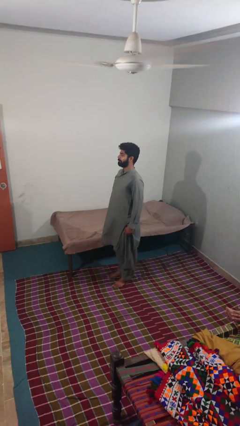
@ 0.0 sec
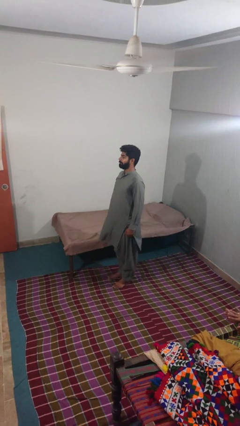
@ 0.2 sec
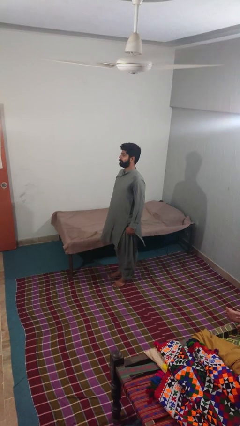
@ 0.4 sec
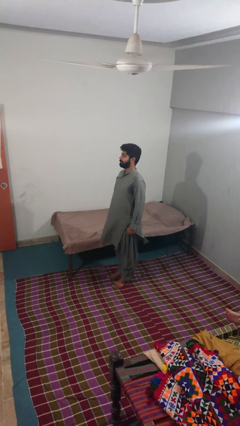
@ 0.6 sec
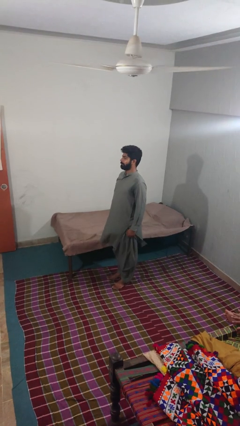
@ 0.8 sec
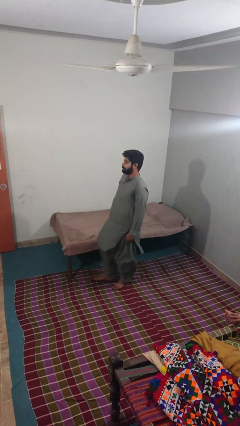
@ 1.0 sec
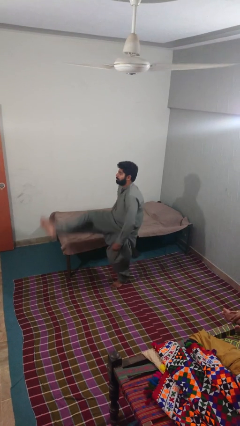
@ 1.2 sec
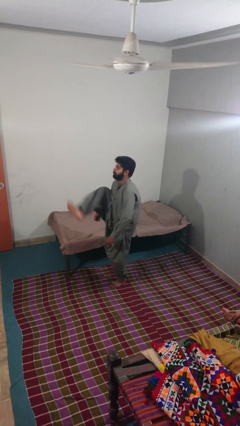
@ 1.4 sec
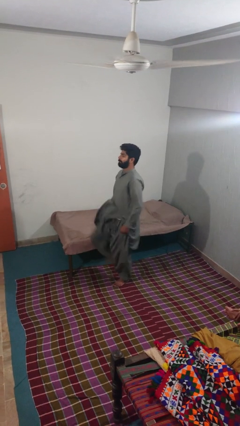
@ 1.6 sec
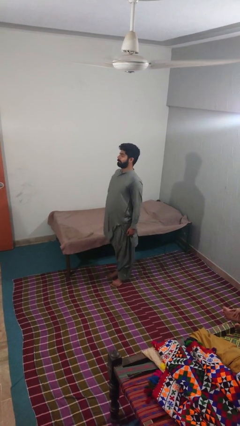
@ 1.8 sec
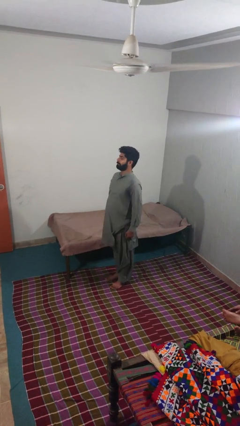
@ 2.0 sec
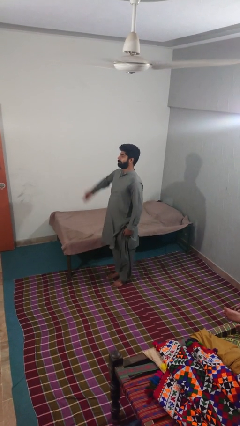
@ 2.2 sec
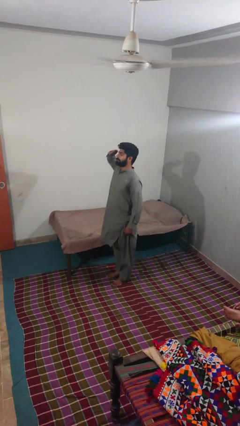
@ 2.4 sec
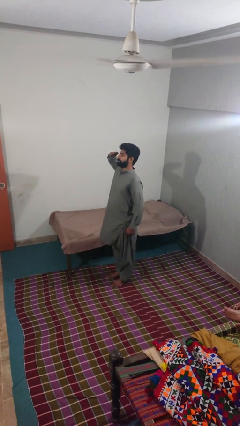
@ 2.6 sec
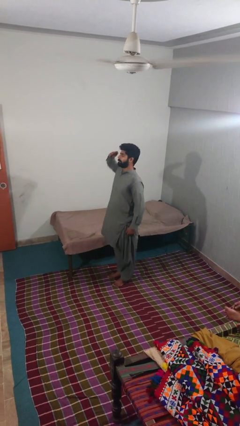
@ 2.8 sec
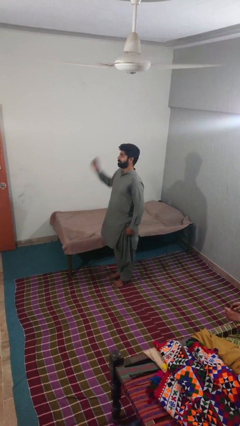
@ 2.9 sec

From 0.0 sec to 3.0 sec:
person salutes

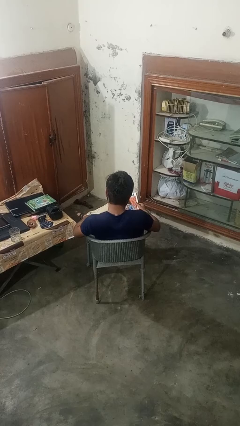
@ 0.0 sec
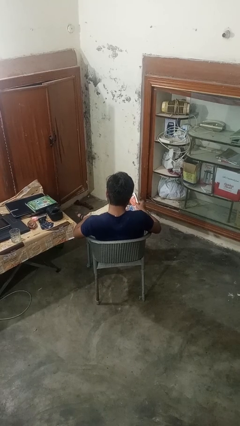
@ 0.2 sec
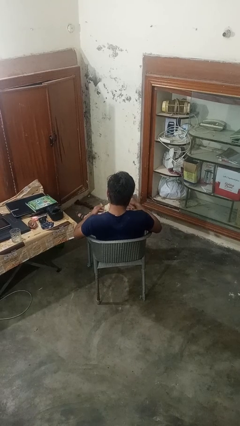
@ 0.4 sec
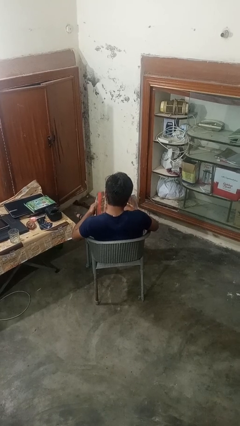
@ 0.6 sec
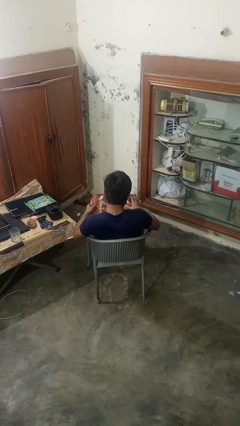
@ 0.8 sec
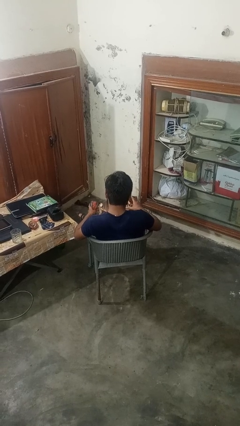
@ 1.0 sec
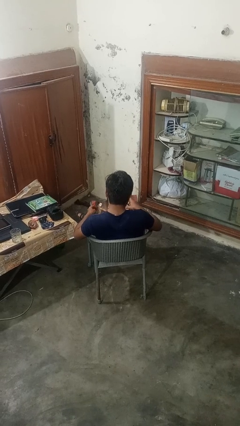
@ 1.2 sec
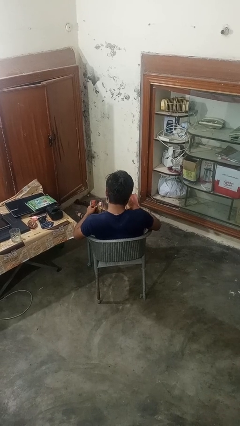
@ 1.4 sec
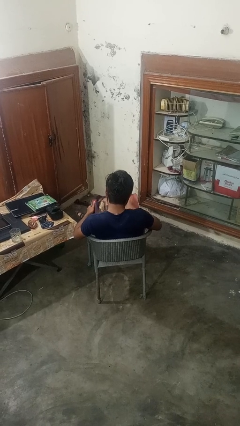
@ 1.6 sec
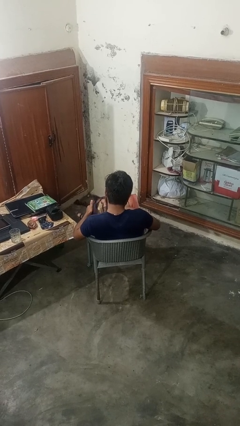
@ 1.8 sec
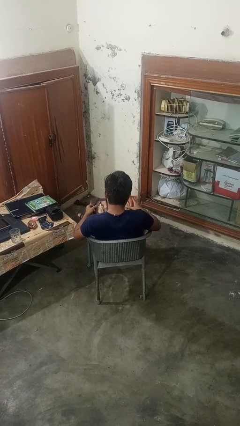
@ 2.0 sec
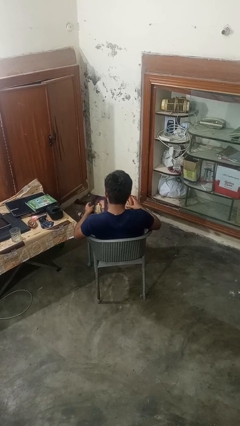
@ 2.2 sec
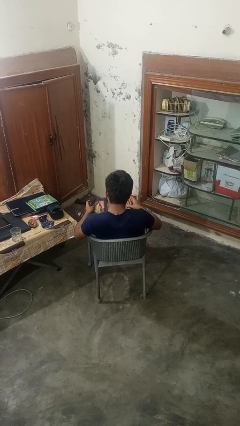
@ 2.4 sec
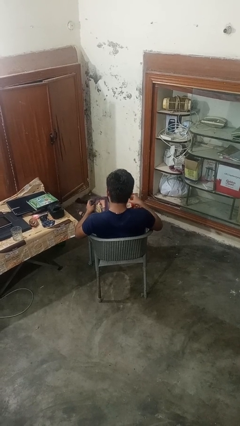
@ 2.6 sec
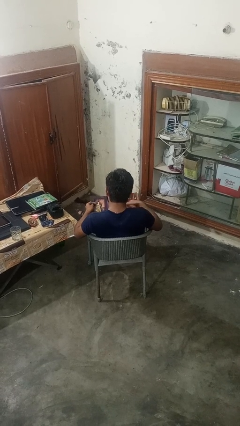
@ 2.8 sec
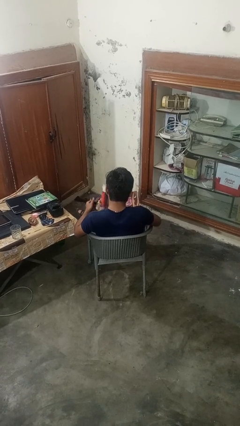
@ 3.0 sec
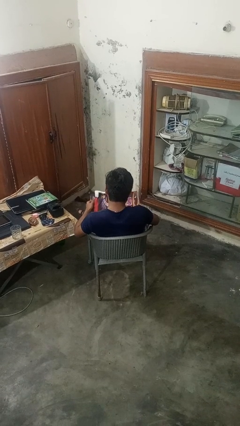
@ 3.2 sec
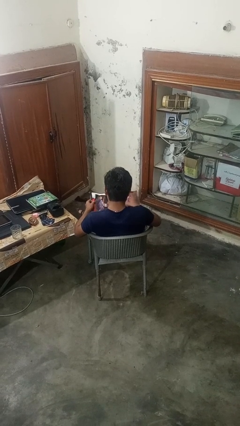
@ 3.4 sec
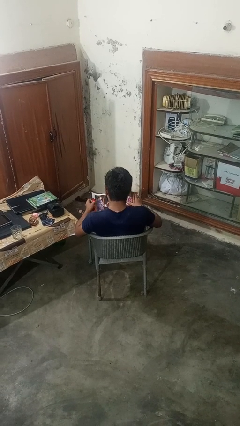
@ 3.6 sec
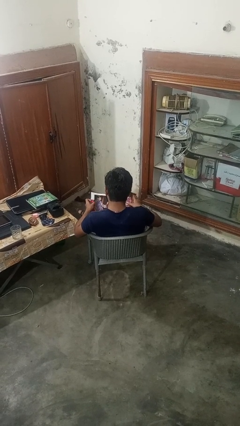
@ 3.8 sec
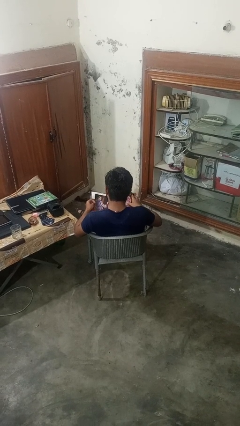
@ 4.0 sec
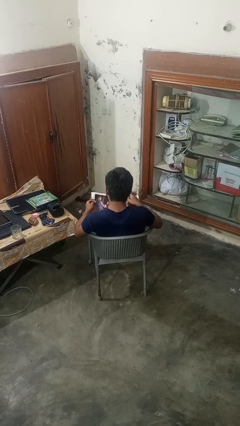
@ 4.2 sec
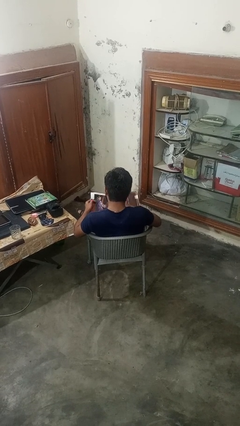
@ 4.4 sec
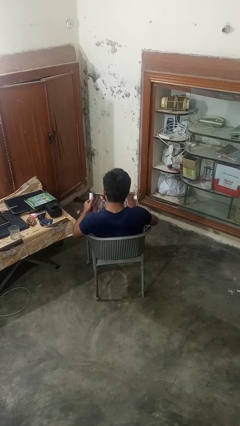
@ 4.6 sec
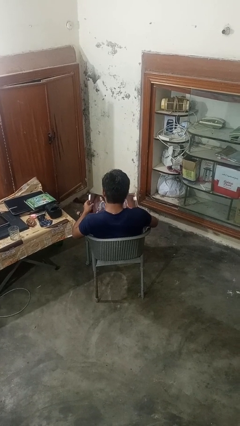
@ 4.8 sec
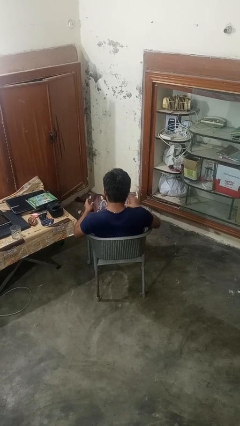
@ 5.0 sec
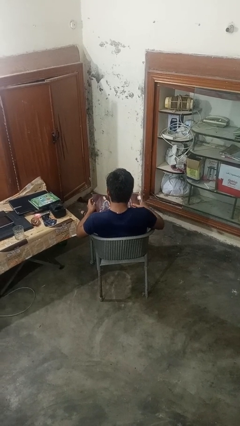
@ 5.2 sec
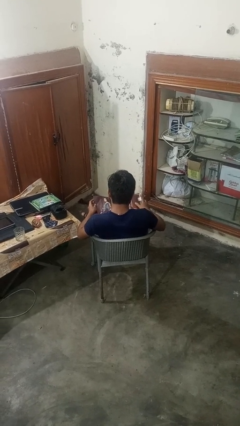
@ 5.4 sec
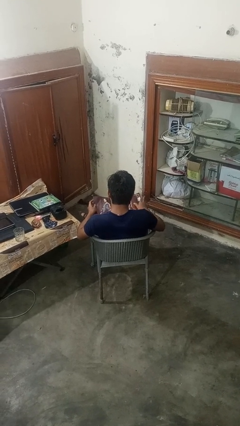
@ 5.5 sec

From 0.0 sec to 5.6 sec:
person reads magazine

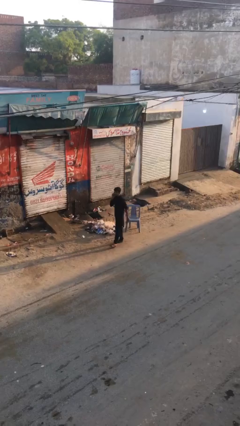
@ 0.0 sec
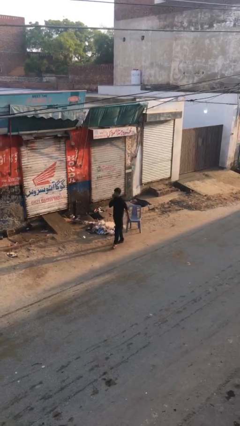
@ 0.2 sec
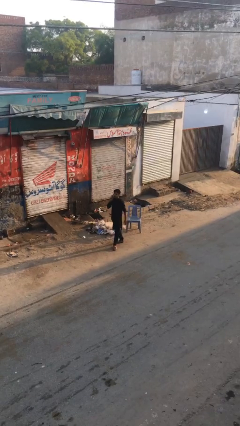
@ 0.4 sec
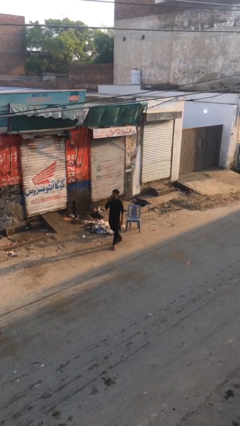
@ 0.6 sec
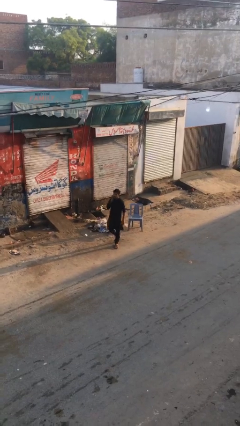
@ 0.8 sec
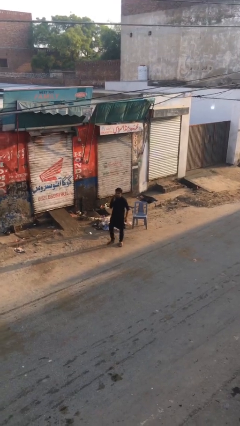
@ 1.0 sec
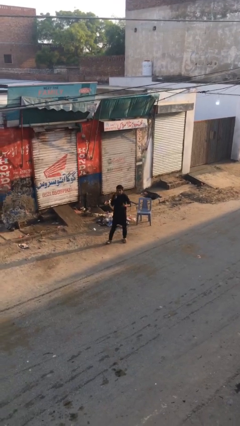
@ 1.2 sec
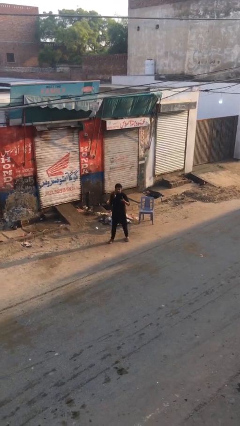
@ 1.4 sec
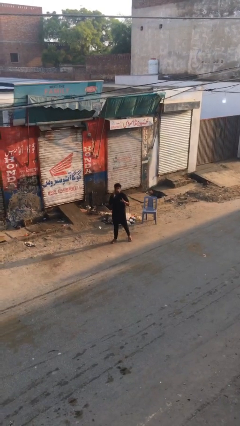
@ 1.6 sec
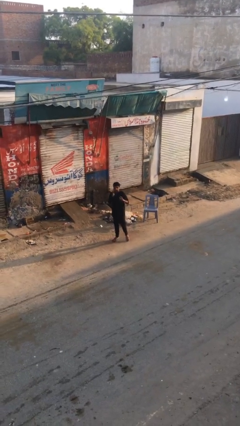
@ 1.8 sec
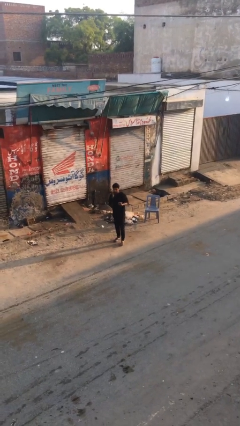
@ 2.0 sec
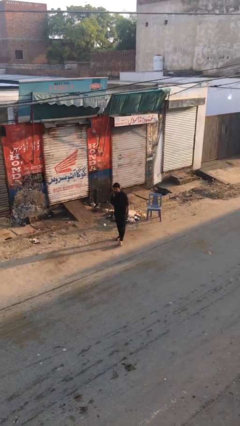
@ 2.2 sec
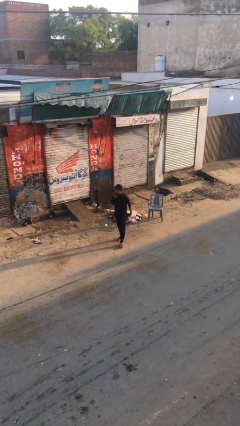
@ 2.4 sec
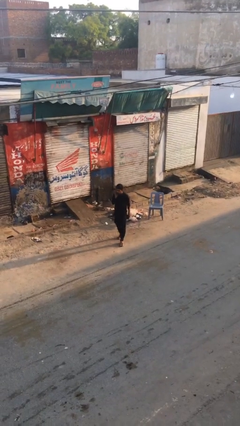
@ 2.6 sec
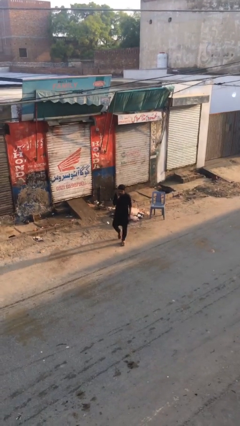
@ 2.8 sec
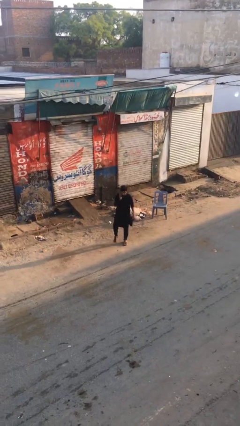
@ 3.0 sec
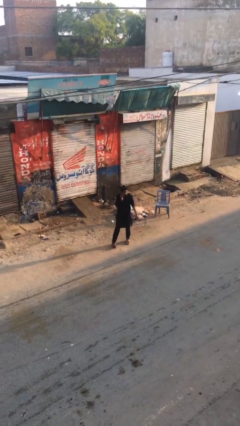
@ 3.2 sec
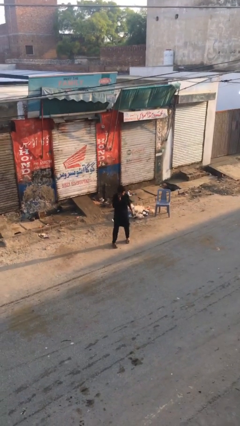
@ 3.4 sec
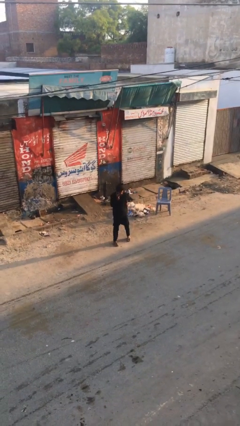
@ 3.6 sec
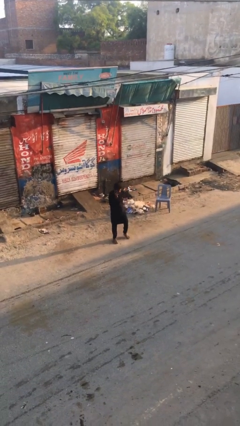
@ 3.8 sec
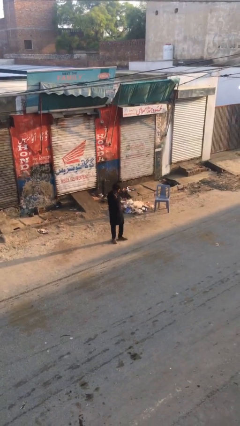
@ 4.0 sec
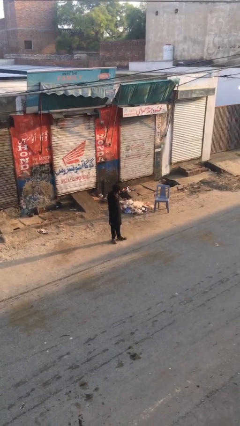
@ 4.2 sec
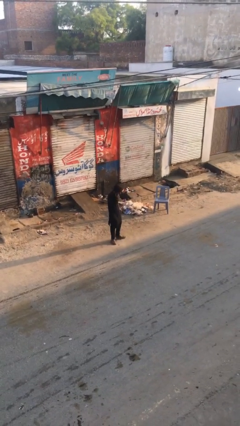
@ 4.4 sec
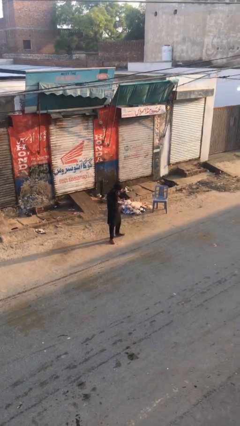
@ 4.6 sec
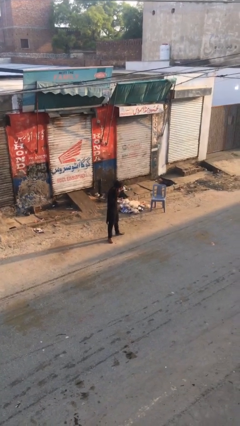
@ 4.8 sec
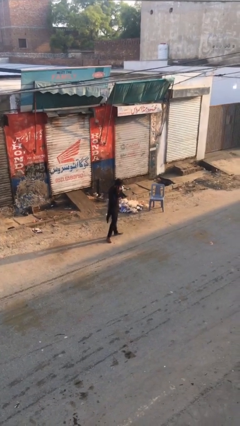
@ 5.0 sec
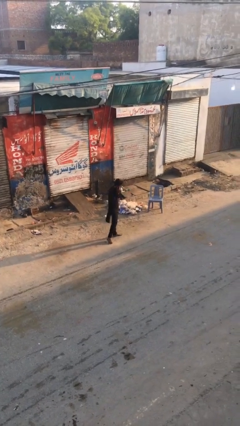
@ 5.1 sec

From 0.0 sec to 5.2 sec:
person talks on phone

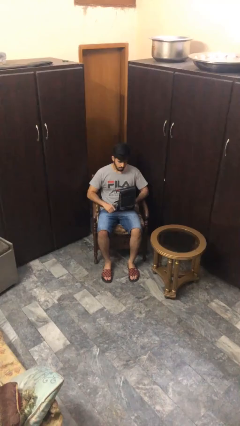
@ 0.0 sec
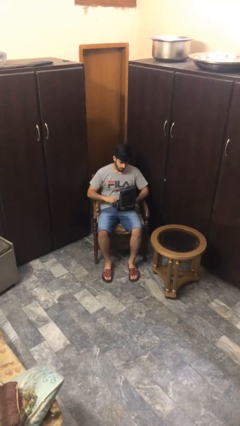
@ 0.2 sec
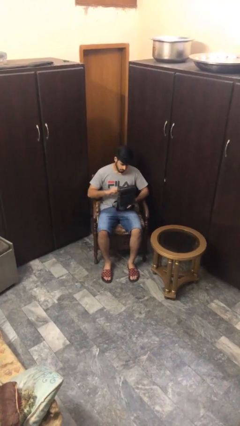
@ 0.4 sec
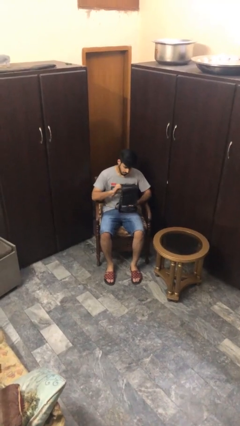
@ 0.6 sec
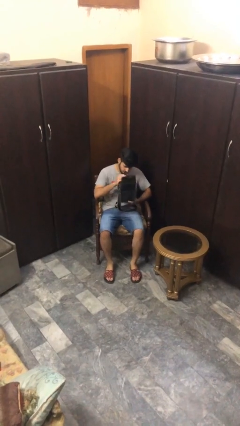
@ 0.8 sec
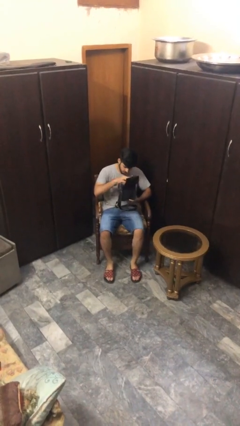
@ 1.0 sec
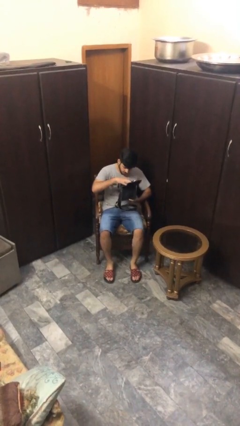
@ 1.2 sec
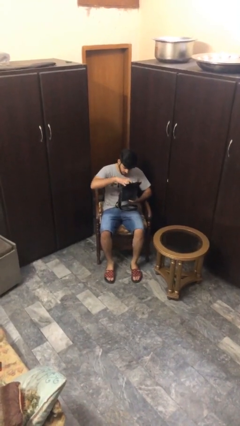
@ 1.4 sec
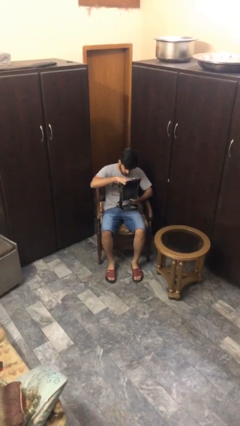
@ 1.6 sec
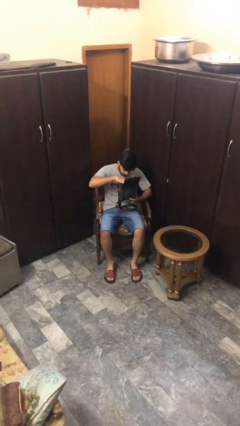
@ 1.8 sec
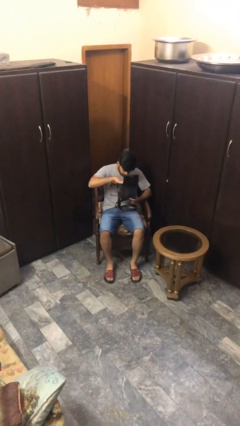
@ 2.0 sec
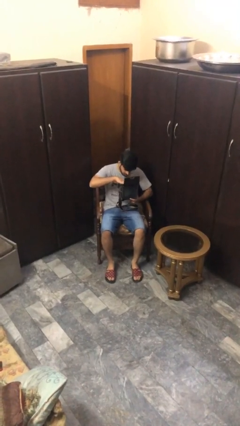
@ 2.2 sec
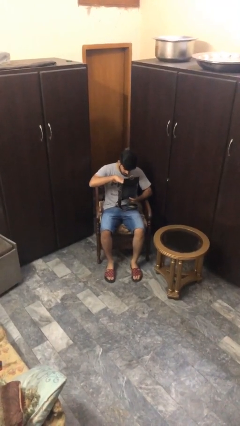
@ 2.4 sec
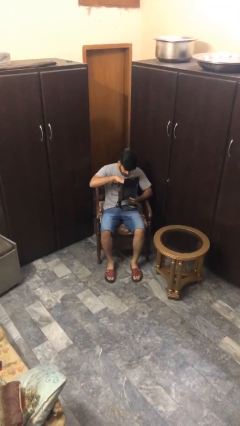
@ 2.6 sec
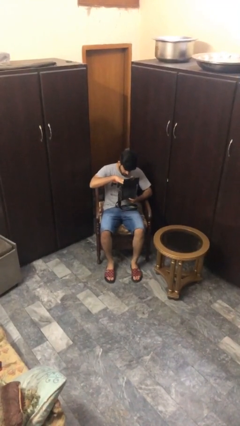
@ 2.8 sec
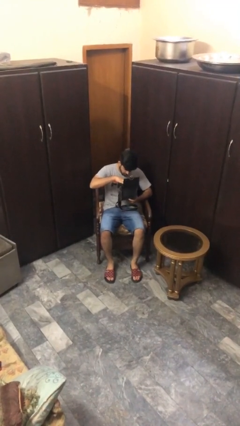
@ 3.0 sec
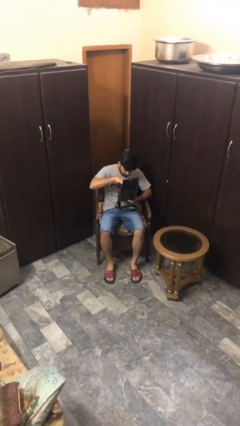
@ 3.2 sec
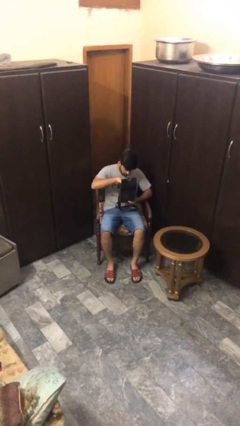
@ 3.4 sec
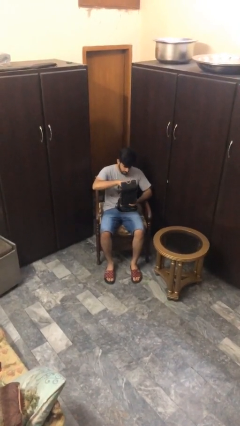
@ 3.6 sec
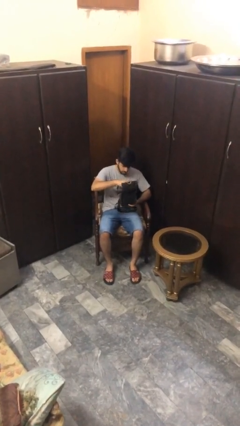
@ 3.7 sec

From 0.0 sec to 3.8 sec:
person searches in purse
